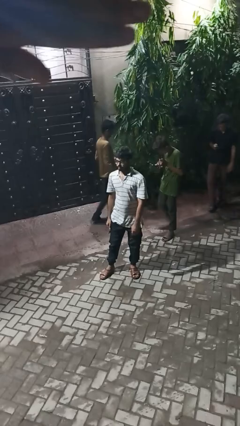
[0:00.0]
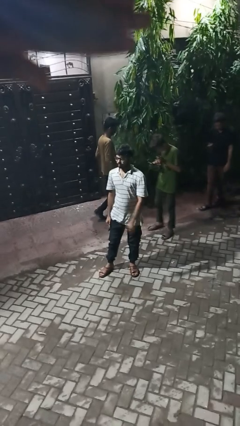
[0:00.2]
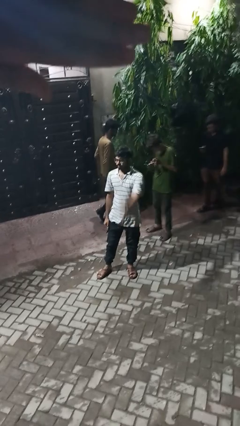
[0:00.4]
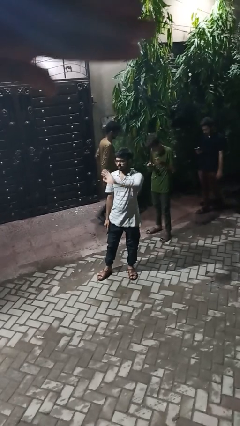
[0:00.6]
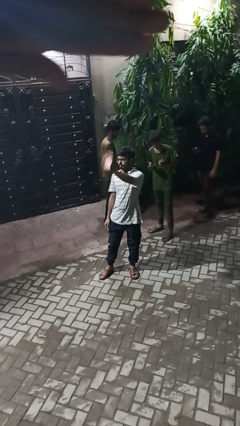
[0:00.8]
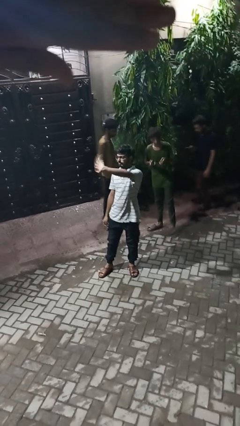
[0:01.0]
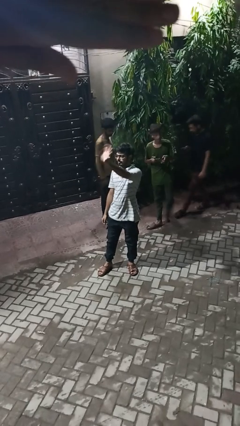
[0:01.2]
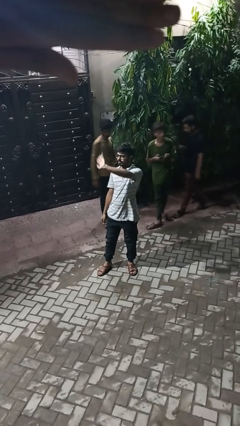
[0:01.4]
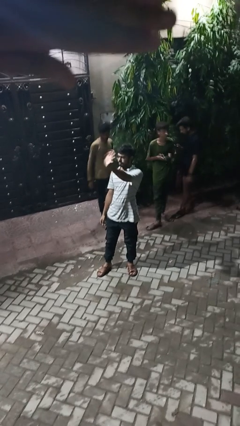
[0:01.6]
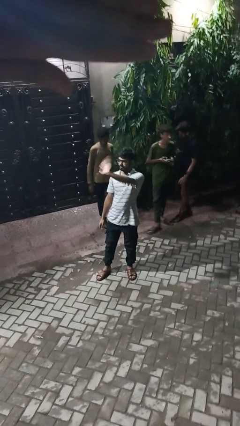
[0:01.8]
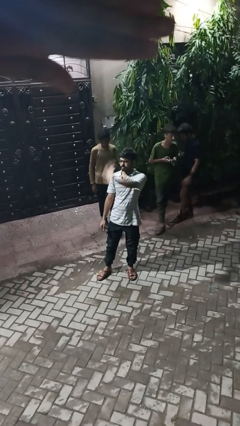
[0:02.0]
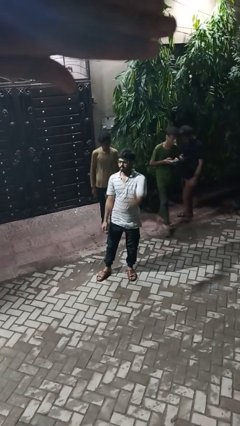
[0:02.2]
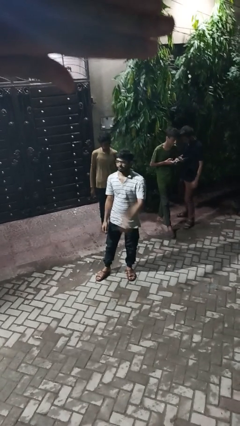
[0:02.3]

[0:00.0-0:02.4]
person waves at person

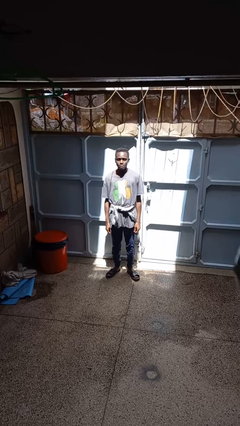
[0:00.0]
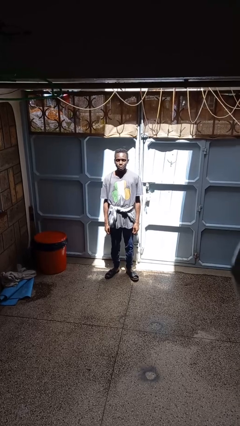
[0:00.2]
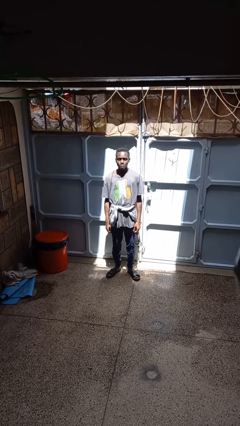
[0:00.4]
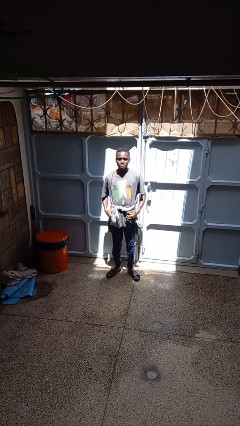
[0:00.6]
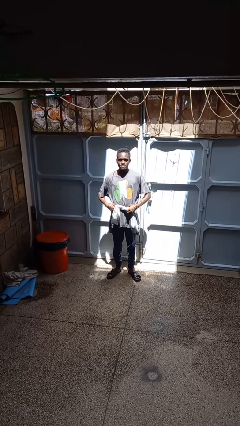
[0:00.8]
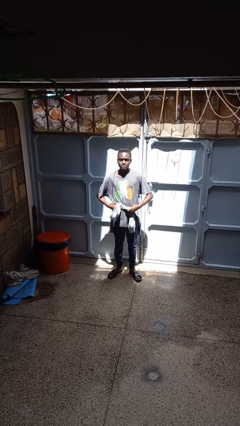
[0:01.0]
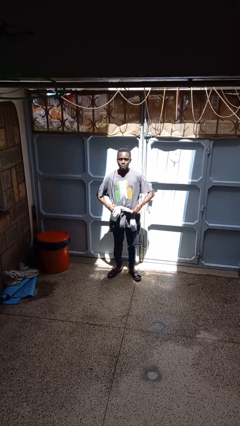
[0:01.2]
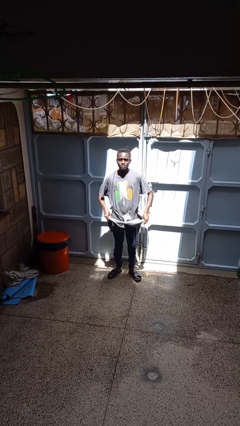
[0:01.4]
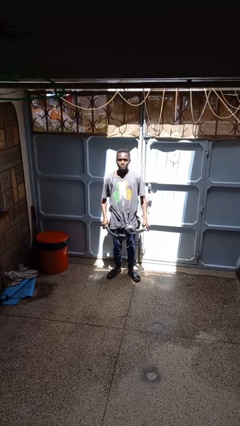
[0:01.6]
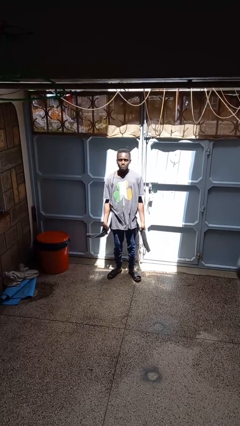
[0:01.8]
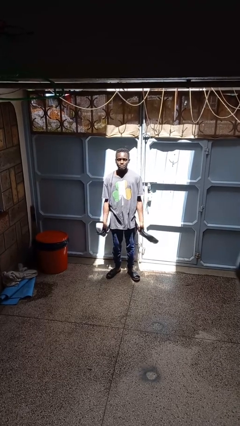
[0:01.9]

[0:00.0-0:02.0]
person unties jacket around waist

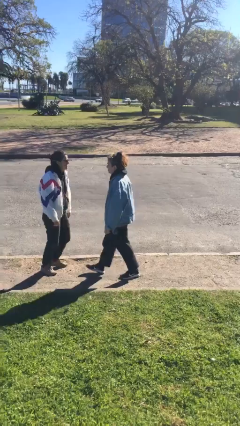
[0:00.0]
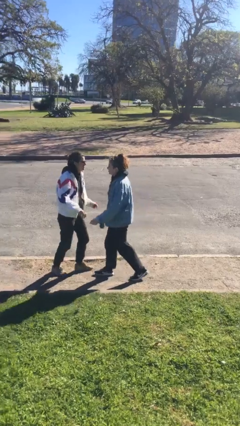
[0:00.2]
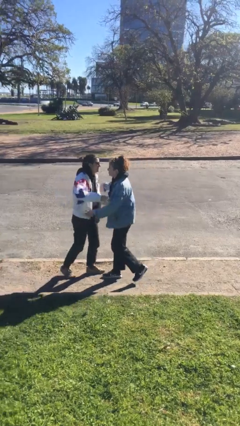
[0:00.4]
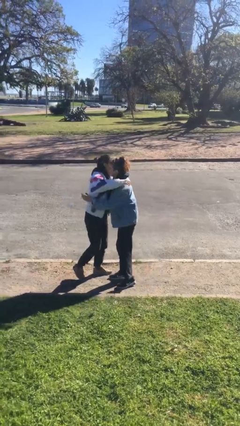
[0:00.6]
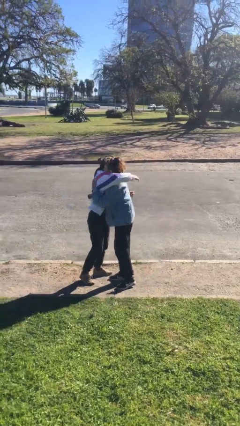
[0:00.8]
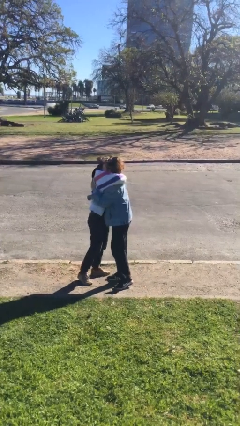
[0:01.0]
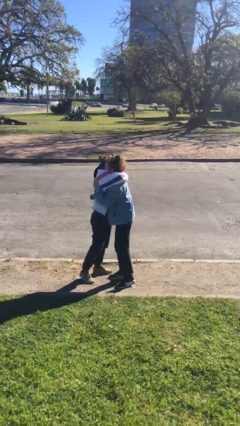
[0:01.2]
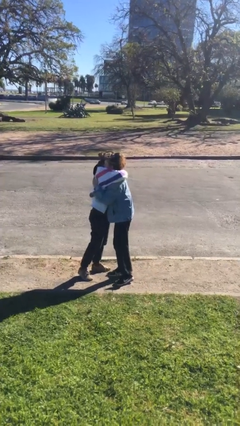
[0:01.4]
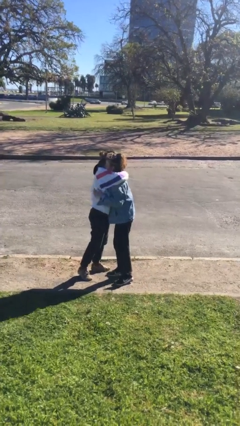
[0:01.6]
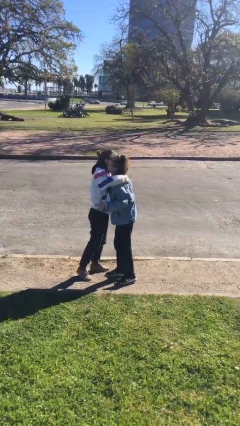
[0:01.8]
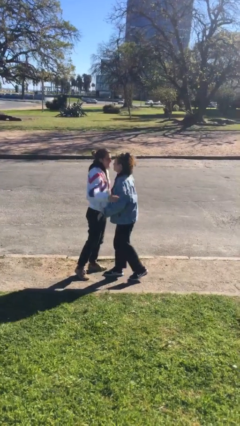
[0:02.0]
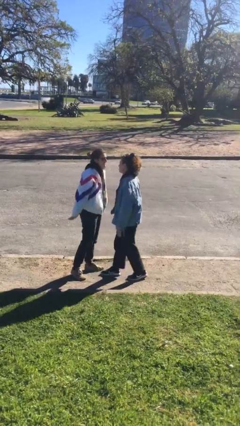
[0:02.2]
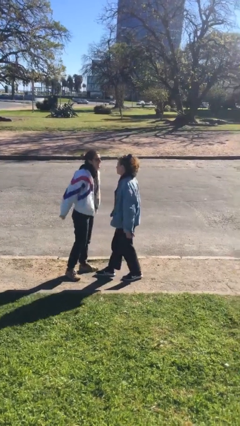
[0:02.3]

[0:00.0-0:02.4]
person embraces person

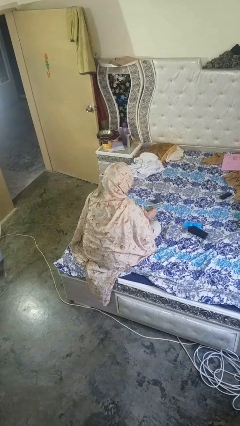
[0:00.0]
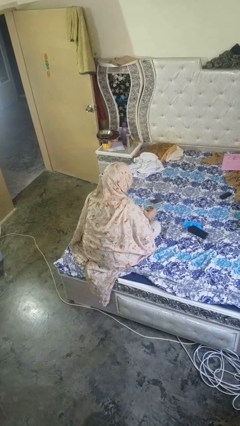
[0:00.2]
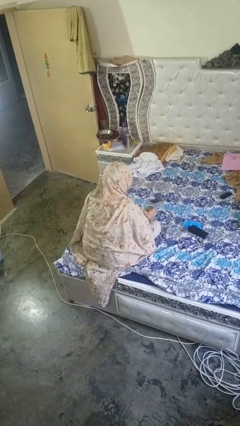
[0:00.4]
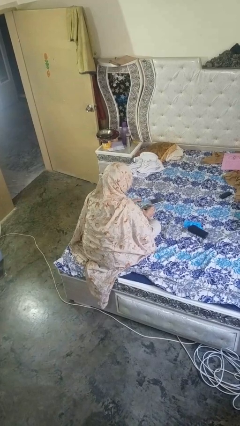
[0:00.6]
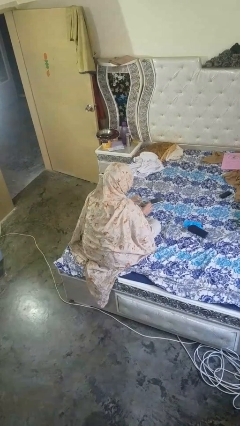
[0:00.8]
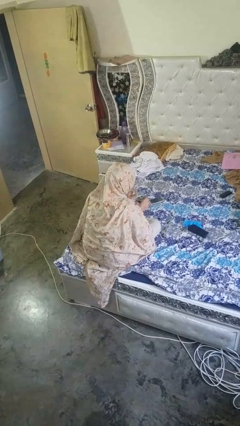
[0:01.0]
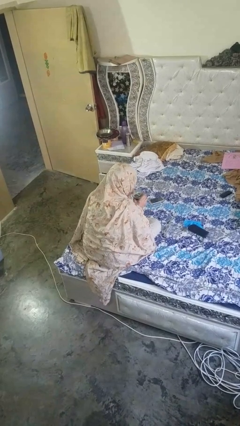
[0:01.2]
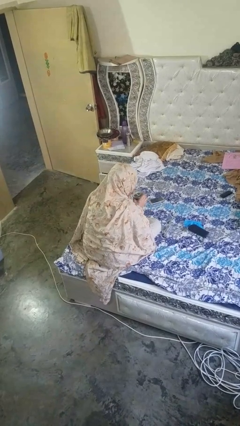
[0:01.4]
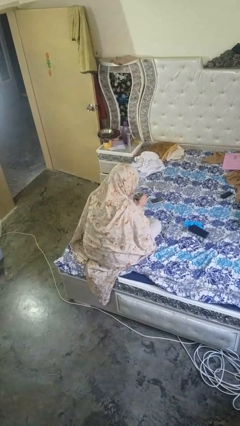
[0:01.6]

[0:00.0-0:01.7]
person drinks from straw

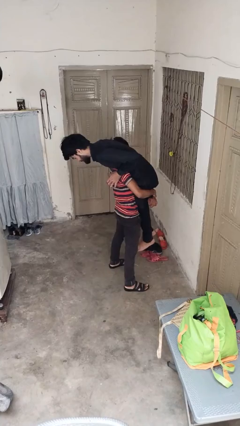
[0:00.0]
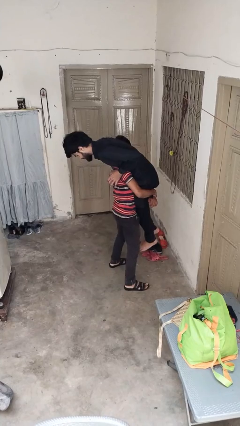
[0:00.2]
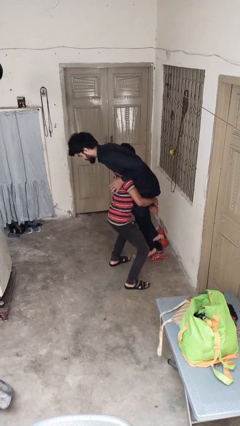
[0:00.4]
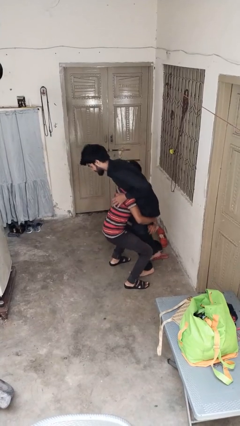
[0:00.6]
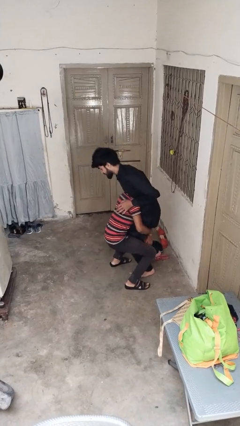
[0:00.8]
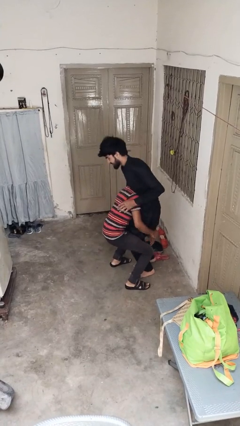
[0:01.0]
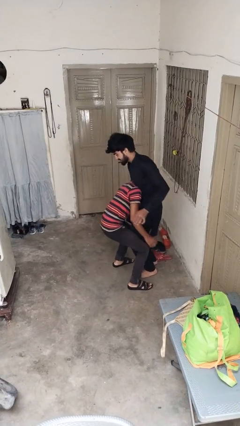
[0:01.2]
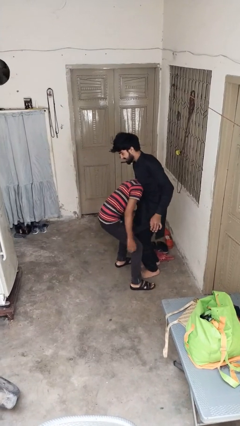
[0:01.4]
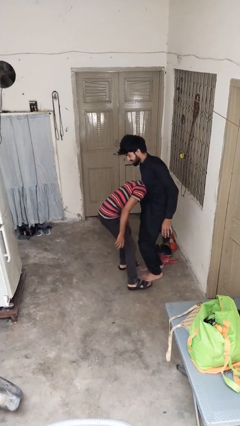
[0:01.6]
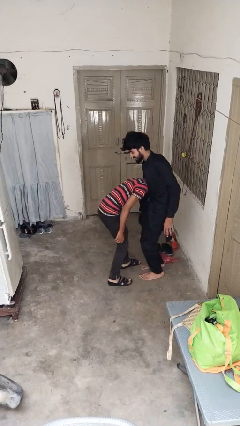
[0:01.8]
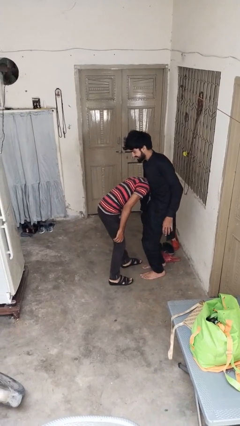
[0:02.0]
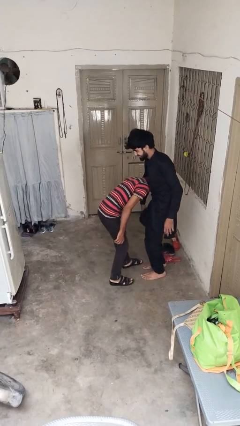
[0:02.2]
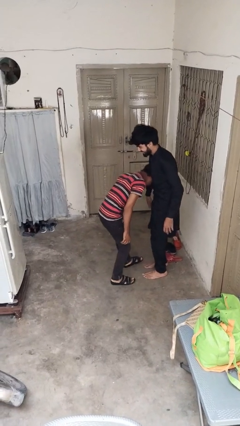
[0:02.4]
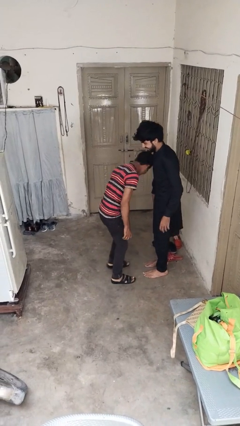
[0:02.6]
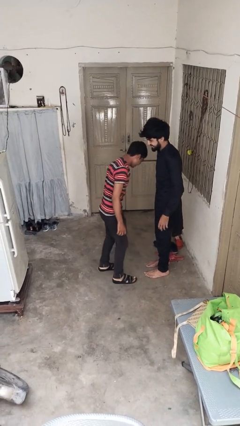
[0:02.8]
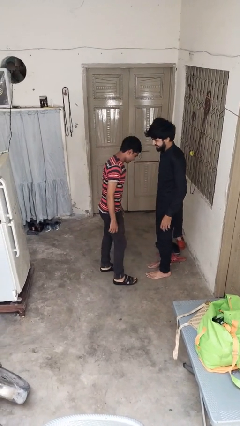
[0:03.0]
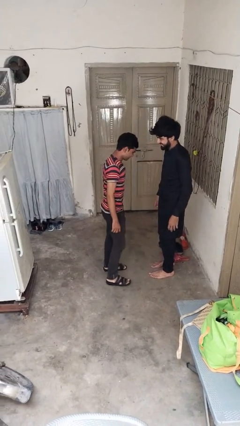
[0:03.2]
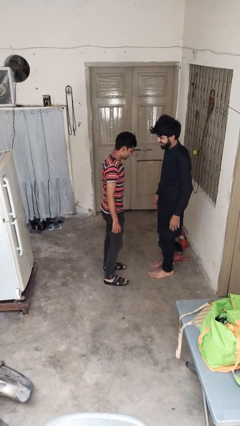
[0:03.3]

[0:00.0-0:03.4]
person puts down person

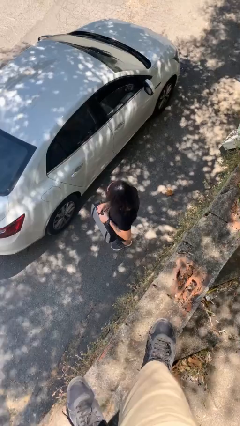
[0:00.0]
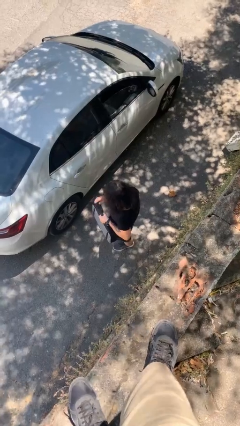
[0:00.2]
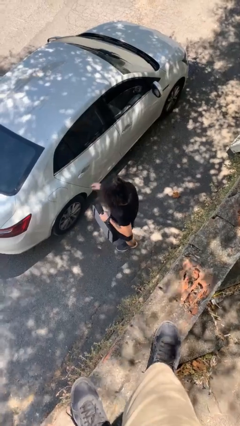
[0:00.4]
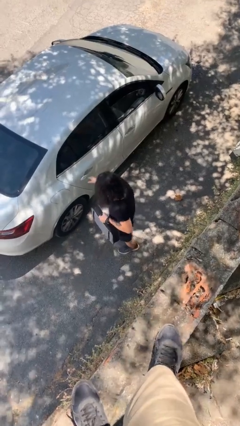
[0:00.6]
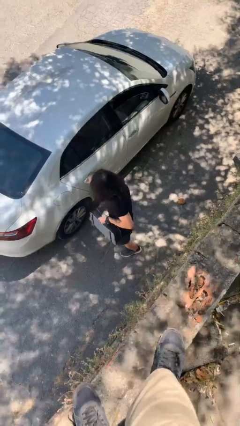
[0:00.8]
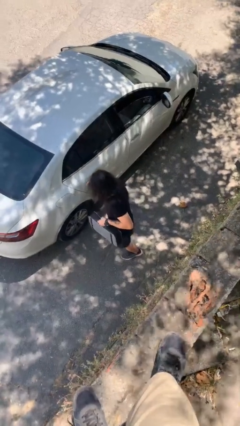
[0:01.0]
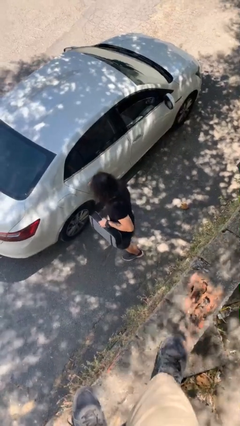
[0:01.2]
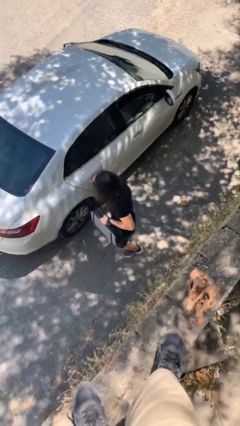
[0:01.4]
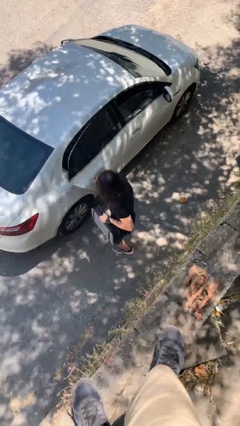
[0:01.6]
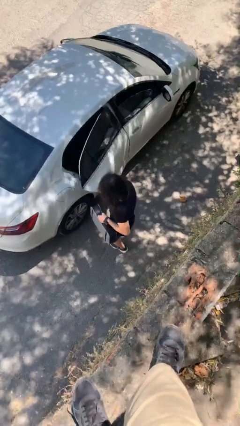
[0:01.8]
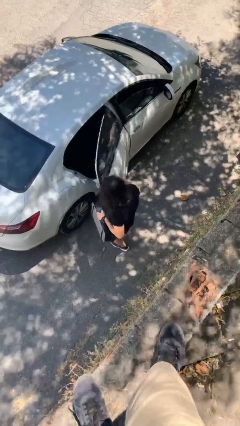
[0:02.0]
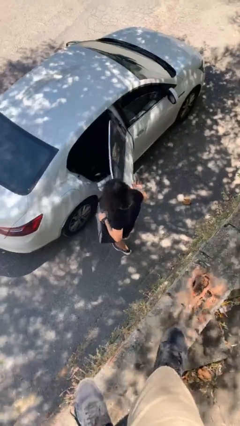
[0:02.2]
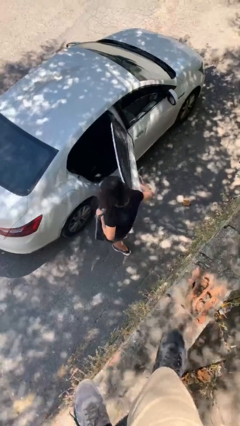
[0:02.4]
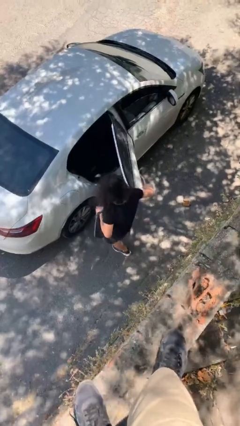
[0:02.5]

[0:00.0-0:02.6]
person opens car door

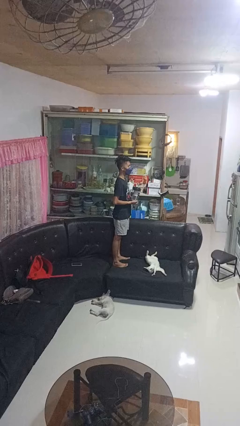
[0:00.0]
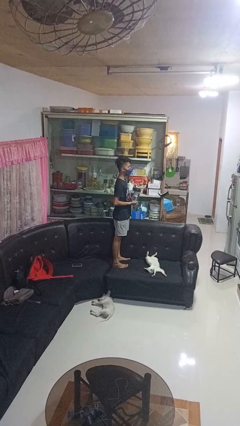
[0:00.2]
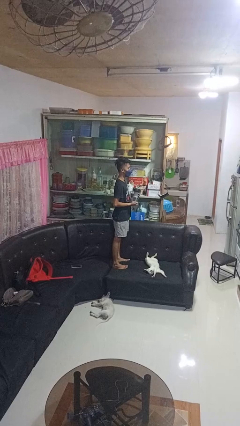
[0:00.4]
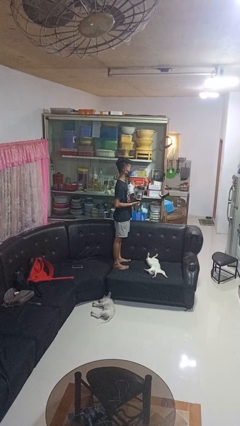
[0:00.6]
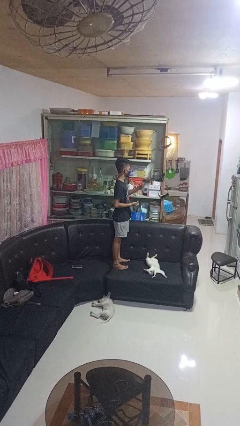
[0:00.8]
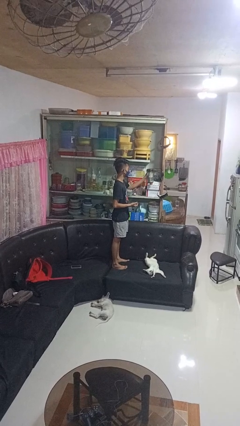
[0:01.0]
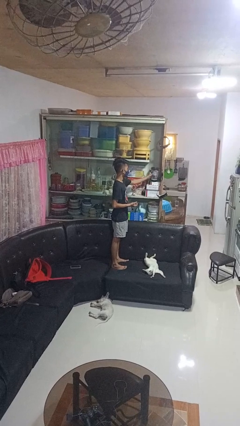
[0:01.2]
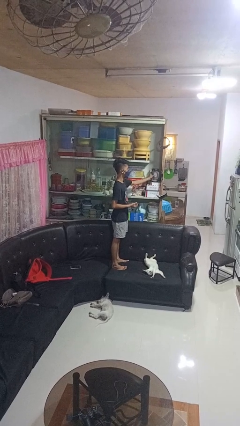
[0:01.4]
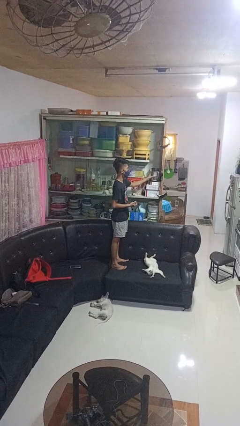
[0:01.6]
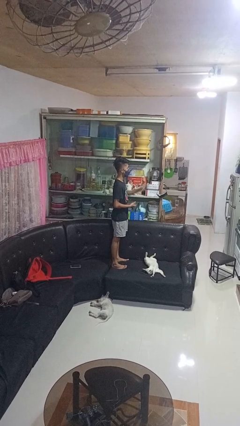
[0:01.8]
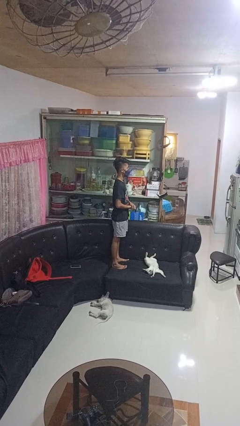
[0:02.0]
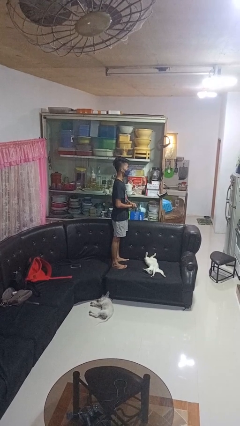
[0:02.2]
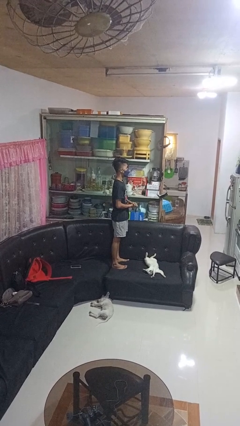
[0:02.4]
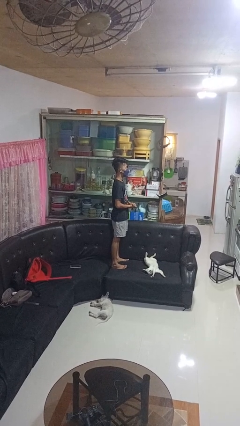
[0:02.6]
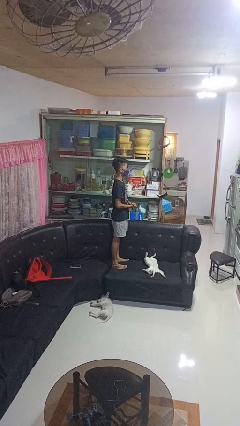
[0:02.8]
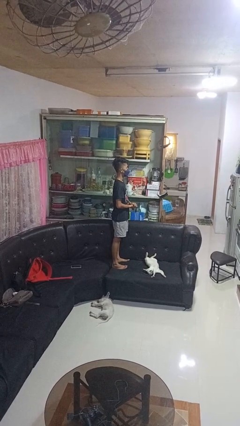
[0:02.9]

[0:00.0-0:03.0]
person puts down object into cabinet
